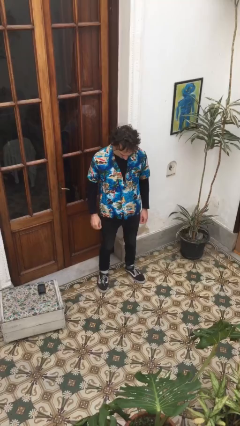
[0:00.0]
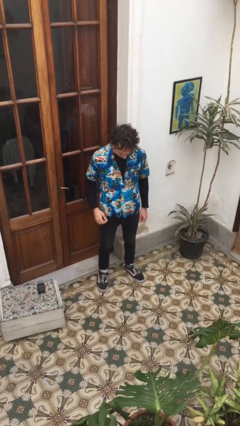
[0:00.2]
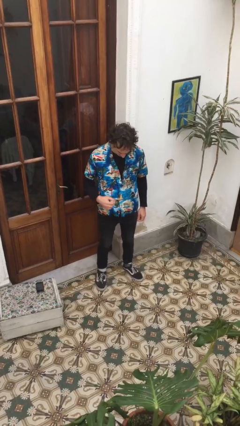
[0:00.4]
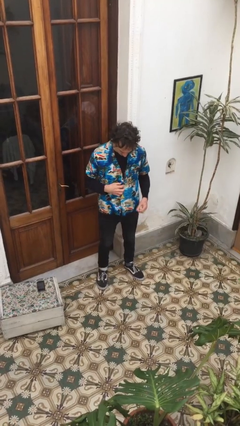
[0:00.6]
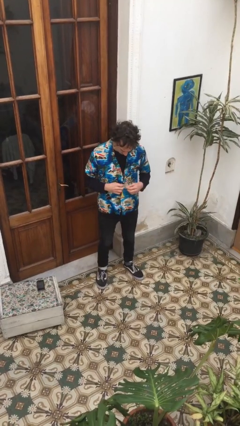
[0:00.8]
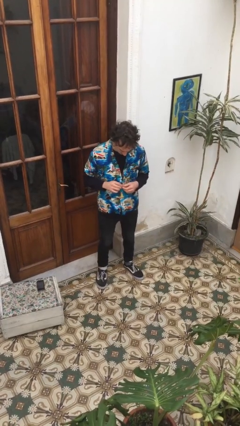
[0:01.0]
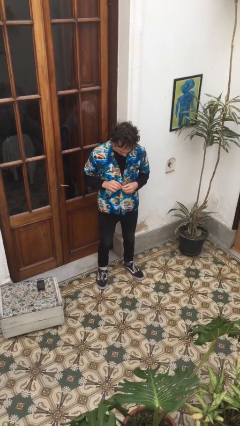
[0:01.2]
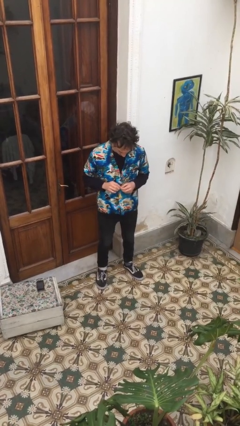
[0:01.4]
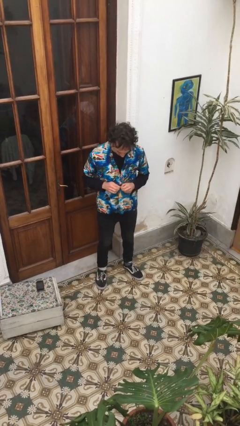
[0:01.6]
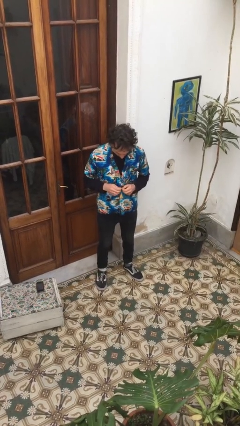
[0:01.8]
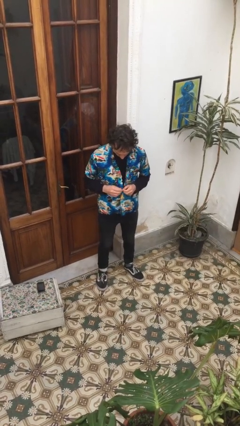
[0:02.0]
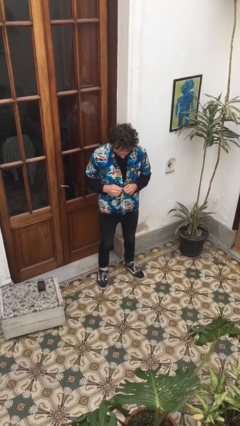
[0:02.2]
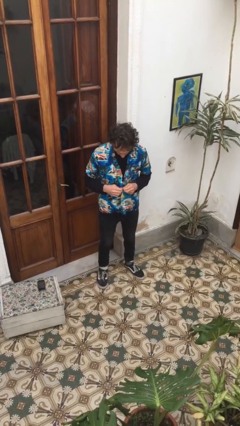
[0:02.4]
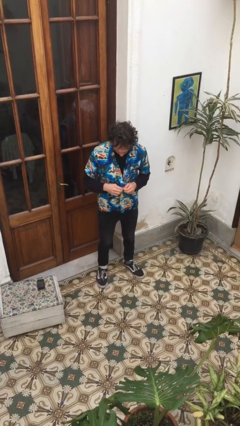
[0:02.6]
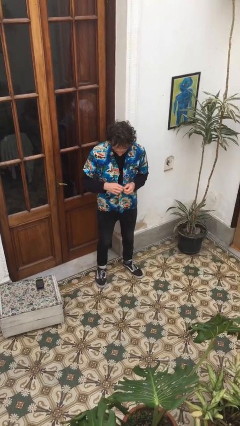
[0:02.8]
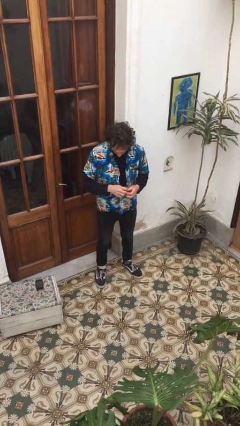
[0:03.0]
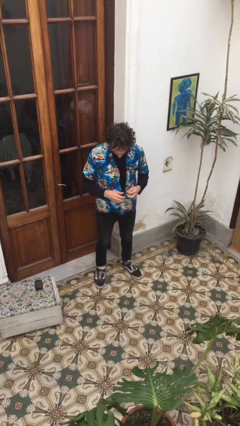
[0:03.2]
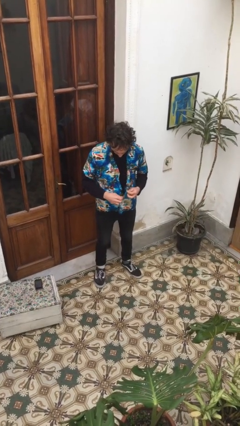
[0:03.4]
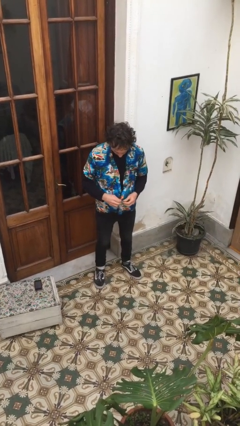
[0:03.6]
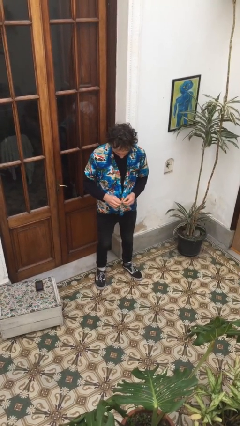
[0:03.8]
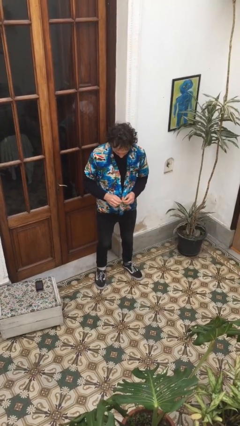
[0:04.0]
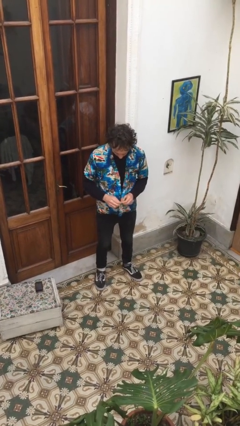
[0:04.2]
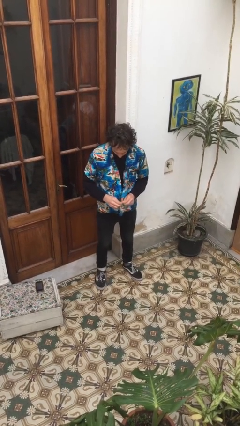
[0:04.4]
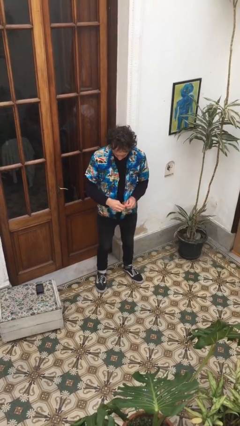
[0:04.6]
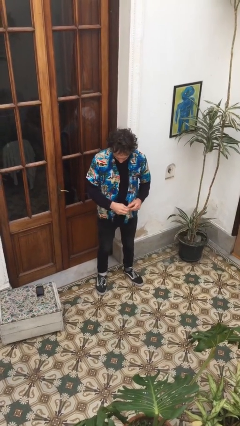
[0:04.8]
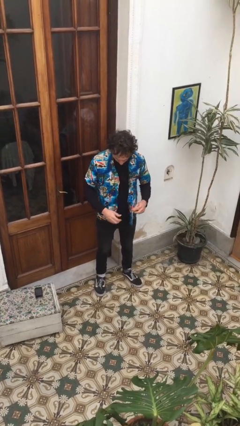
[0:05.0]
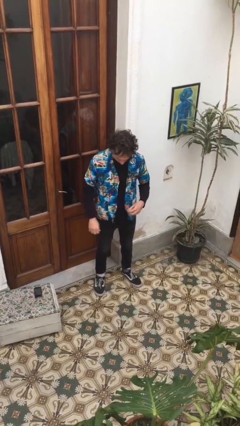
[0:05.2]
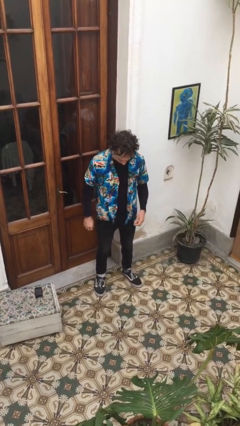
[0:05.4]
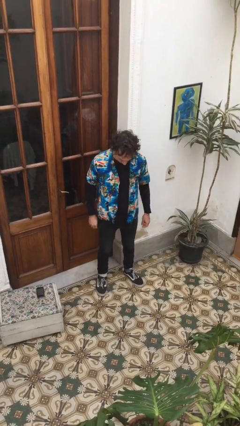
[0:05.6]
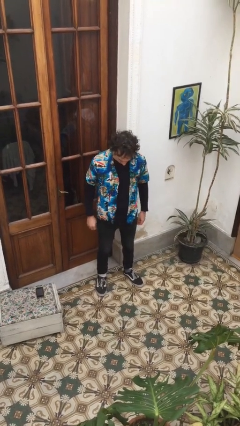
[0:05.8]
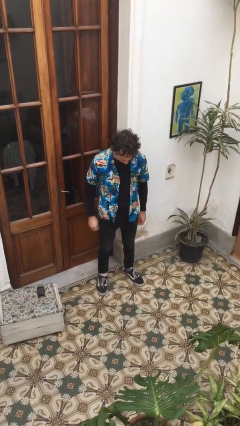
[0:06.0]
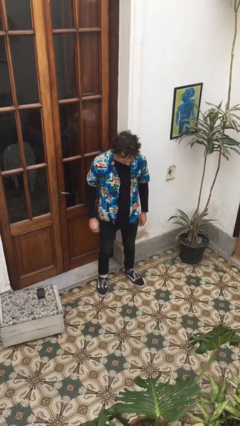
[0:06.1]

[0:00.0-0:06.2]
person unbuttons shirt

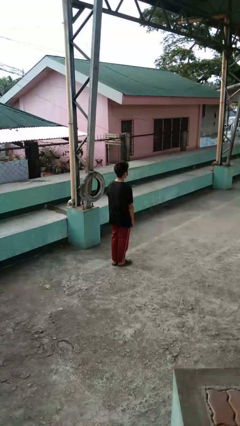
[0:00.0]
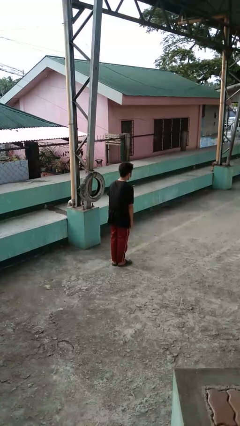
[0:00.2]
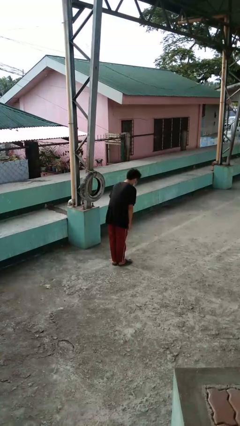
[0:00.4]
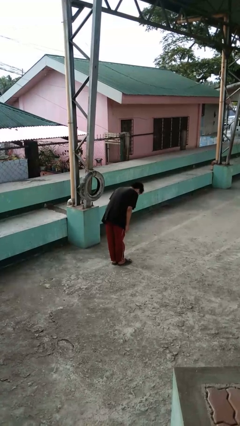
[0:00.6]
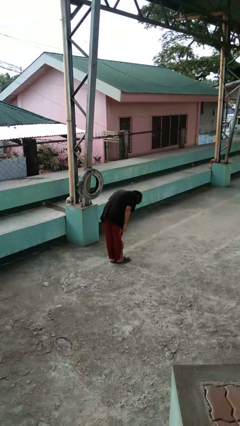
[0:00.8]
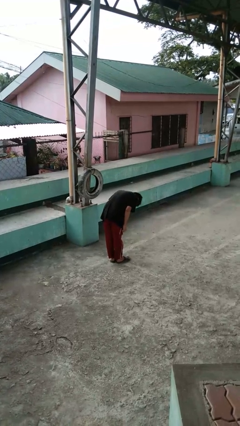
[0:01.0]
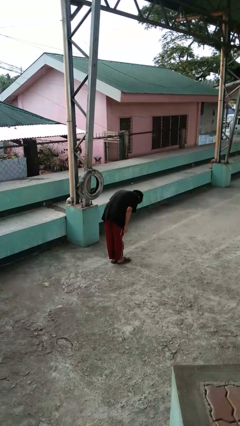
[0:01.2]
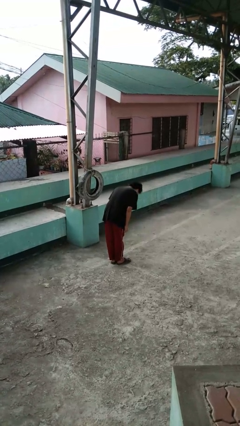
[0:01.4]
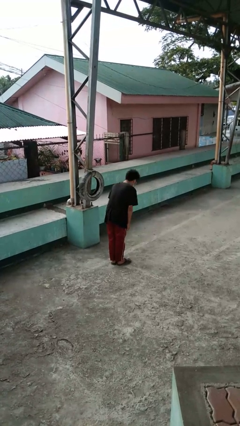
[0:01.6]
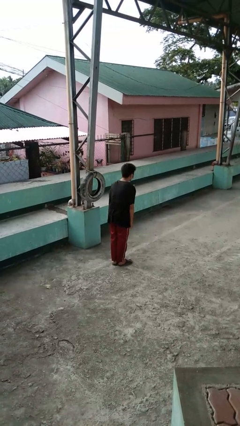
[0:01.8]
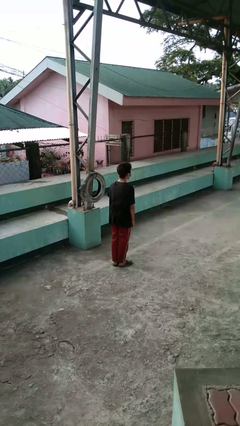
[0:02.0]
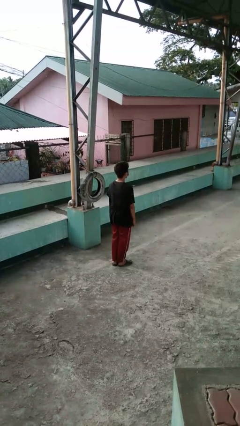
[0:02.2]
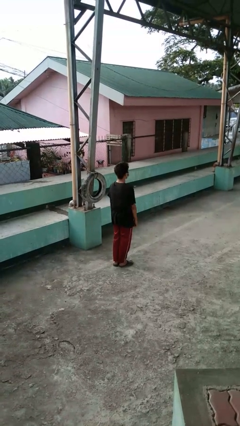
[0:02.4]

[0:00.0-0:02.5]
person bows

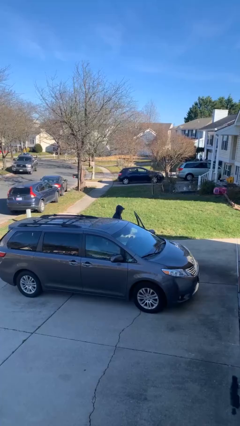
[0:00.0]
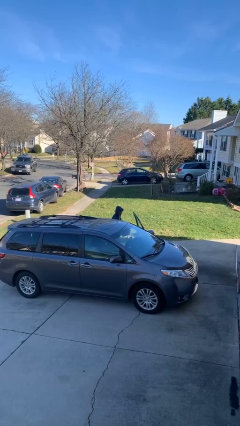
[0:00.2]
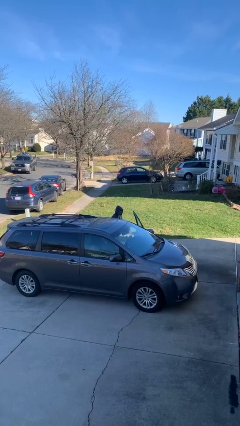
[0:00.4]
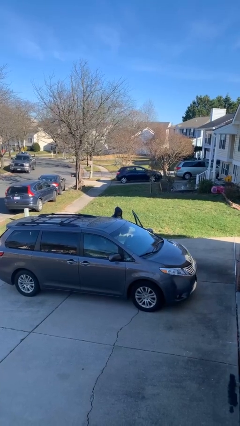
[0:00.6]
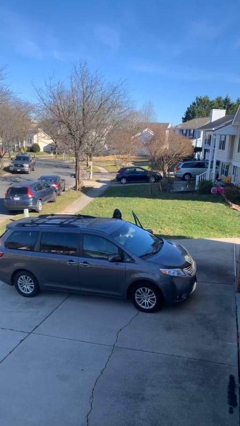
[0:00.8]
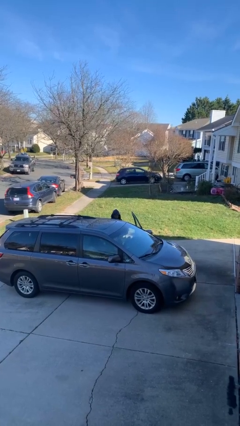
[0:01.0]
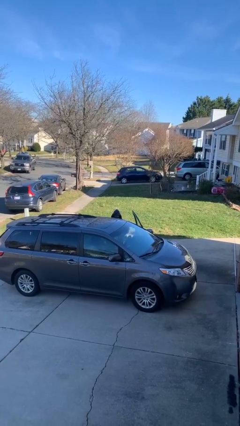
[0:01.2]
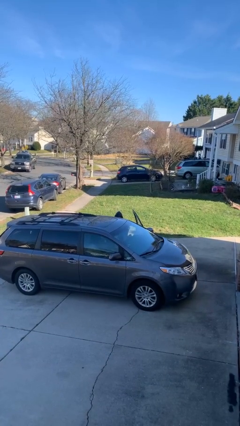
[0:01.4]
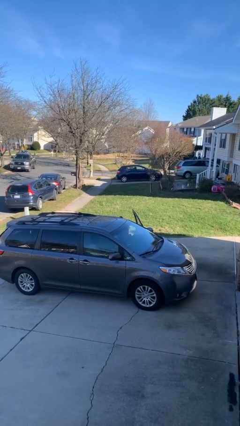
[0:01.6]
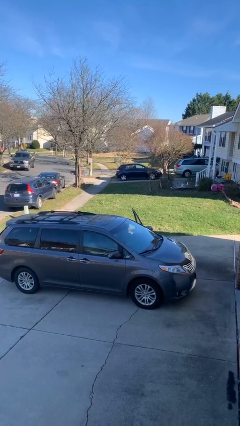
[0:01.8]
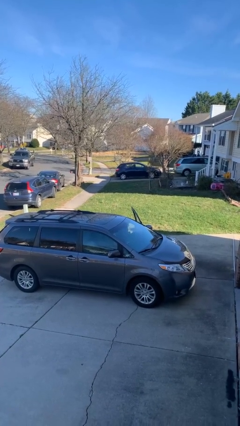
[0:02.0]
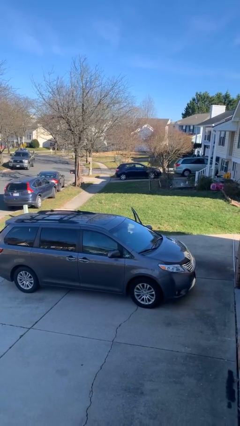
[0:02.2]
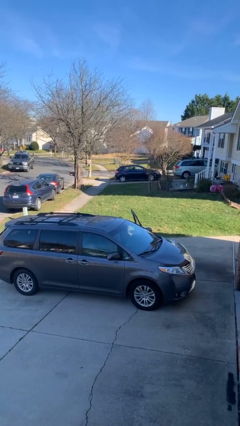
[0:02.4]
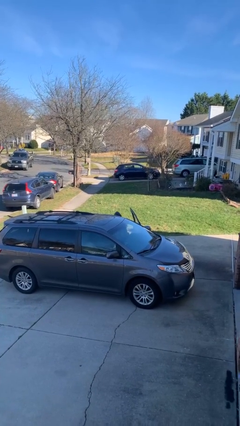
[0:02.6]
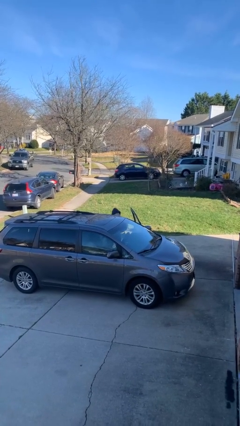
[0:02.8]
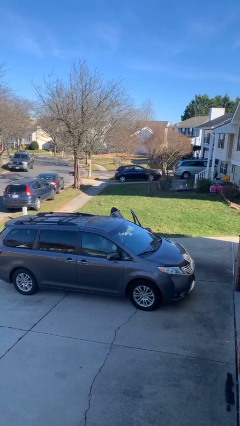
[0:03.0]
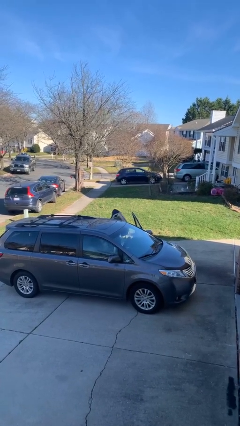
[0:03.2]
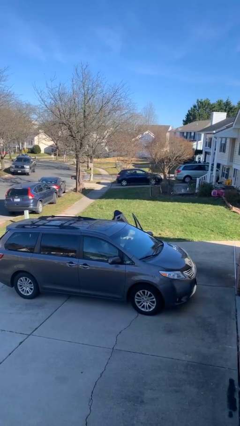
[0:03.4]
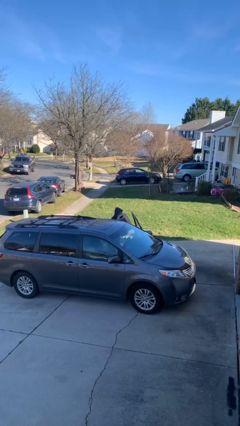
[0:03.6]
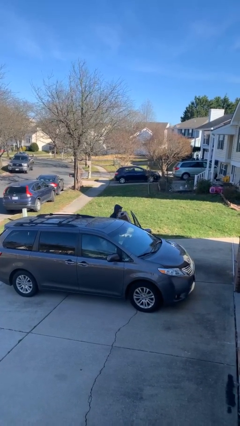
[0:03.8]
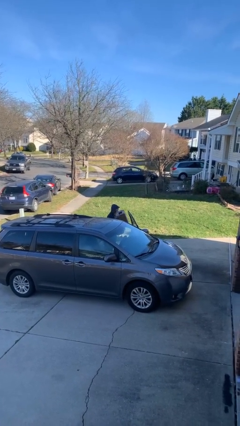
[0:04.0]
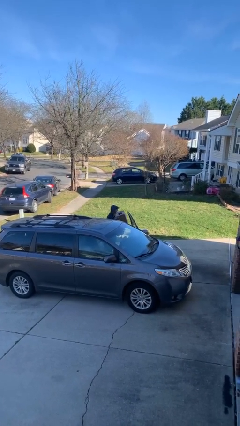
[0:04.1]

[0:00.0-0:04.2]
person unloads car

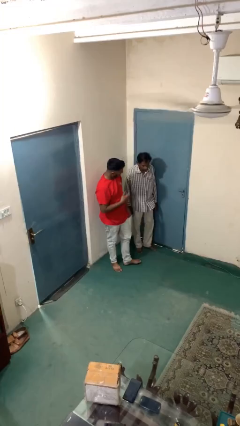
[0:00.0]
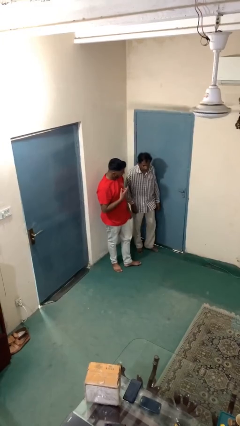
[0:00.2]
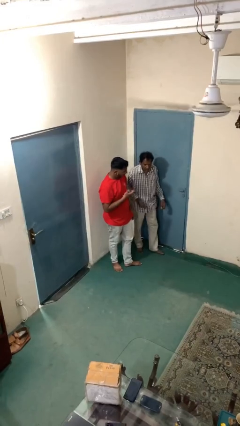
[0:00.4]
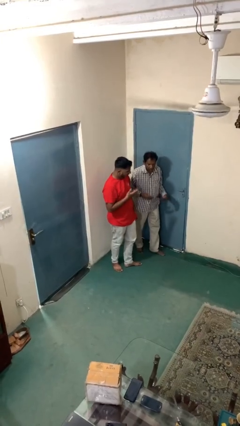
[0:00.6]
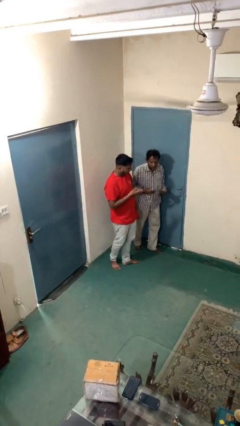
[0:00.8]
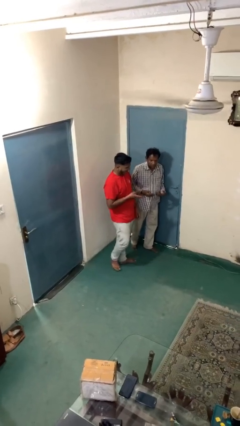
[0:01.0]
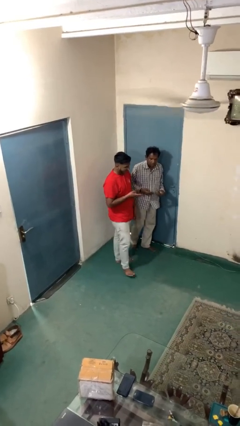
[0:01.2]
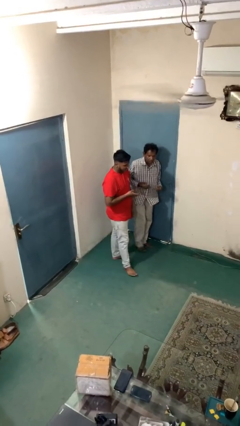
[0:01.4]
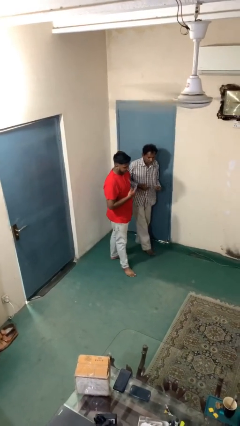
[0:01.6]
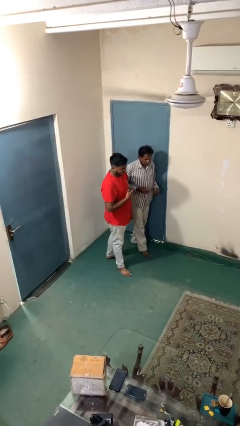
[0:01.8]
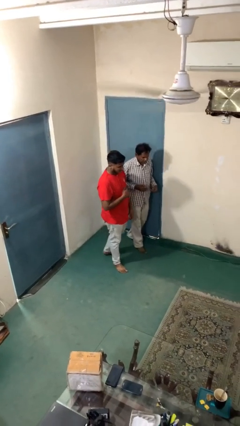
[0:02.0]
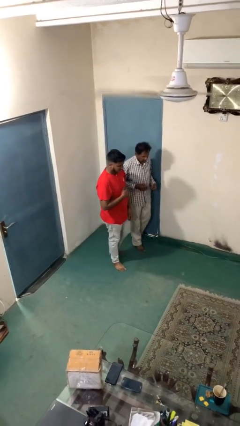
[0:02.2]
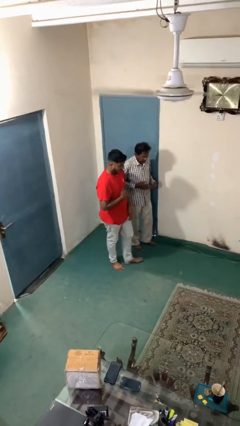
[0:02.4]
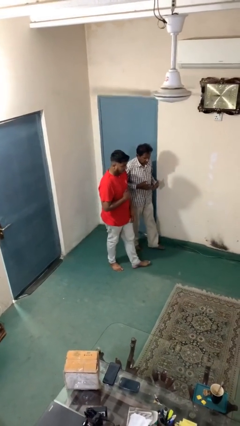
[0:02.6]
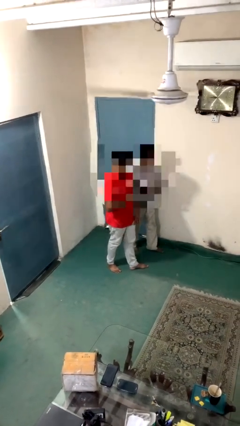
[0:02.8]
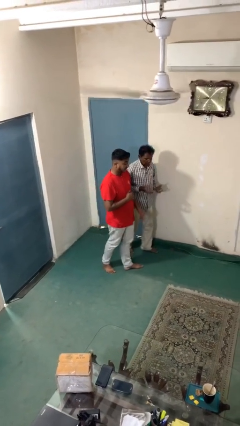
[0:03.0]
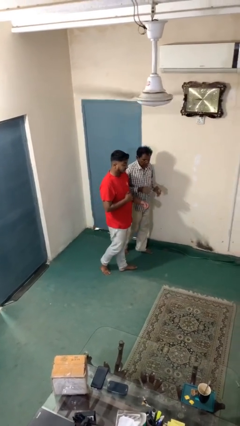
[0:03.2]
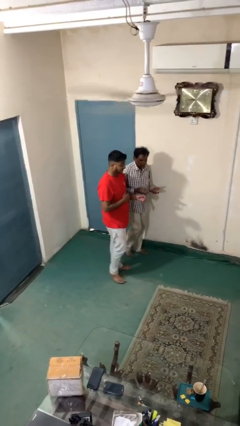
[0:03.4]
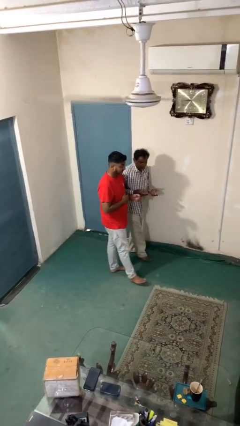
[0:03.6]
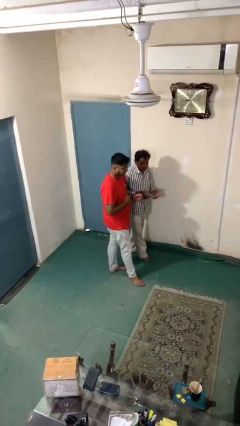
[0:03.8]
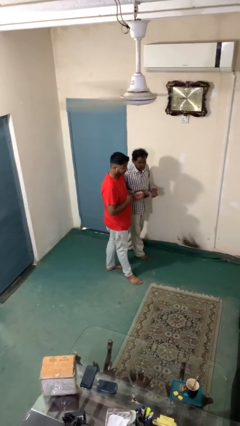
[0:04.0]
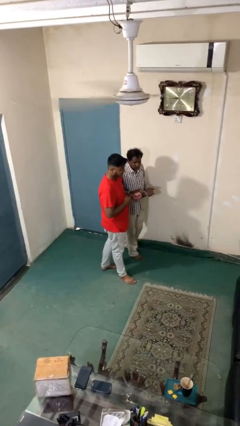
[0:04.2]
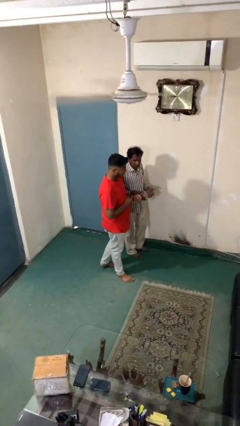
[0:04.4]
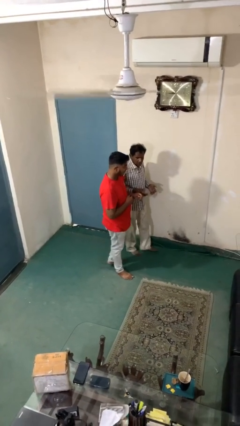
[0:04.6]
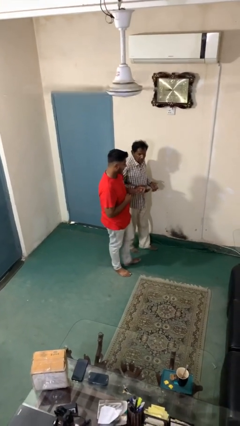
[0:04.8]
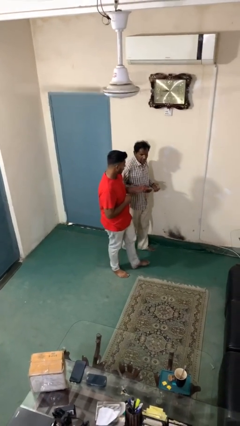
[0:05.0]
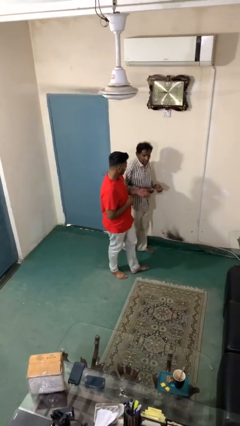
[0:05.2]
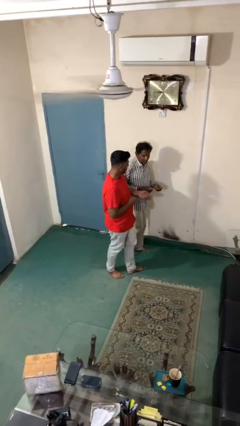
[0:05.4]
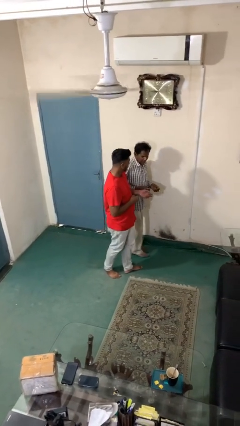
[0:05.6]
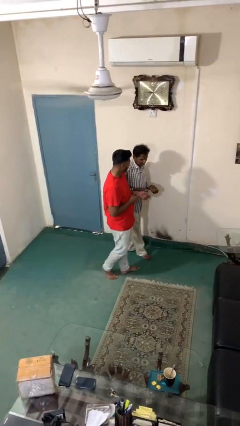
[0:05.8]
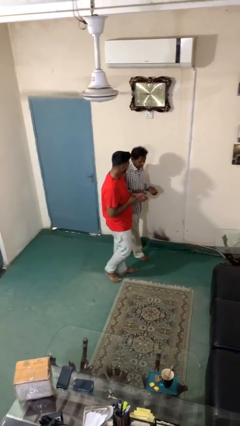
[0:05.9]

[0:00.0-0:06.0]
person talks to person
